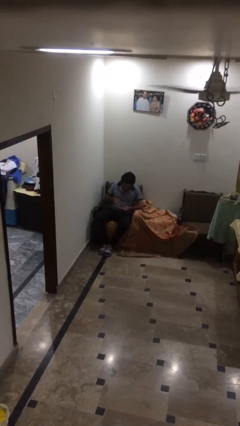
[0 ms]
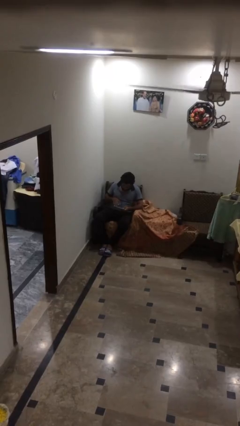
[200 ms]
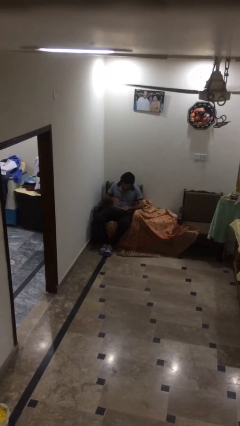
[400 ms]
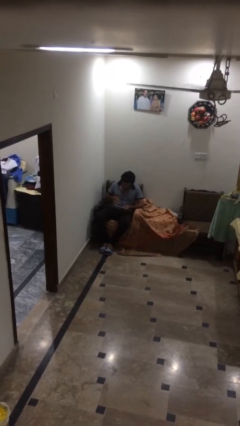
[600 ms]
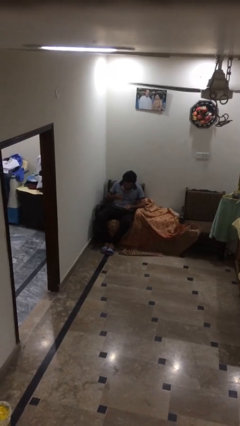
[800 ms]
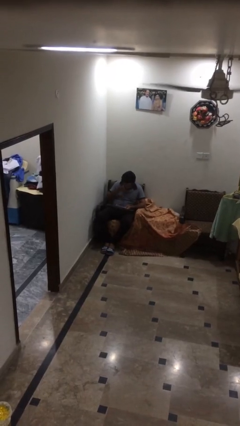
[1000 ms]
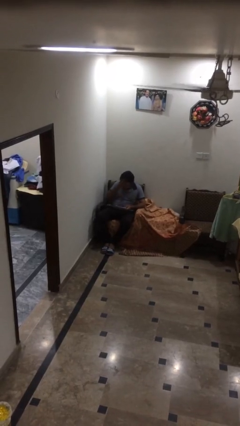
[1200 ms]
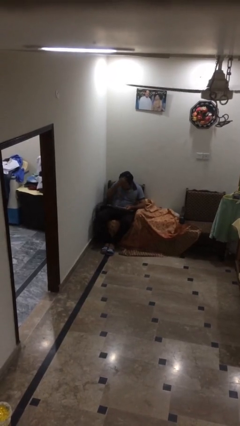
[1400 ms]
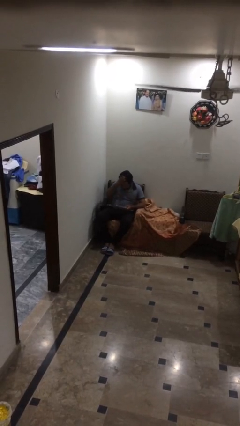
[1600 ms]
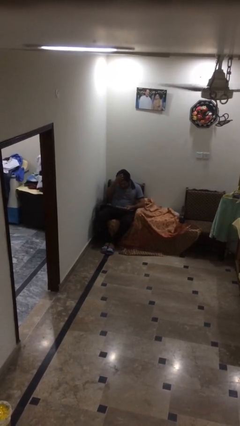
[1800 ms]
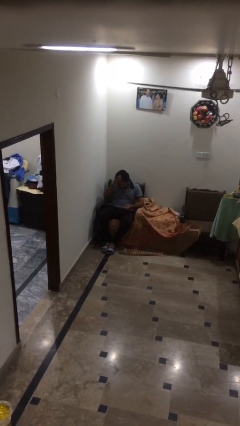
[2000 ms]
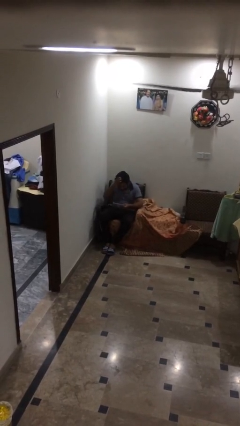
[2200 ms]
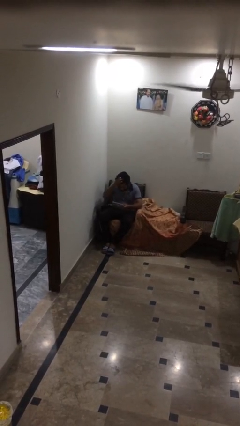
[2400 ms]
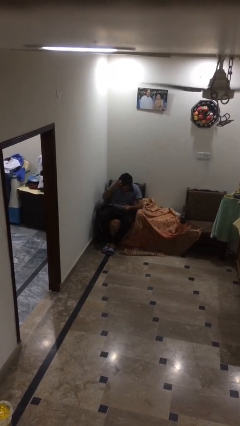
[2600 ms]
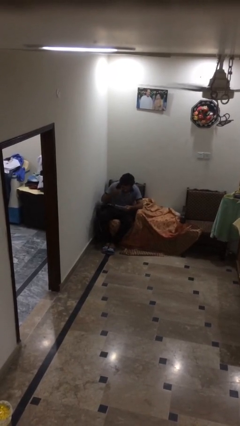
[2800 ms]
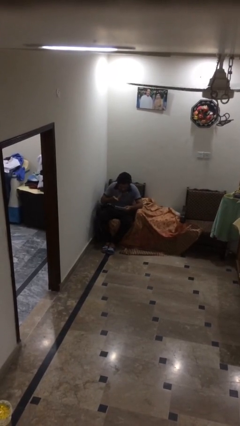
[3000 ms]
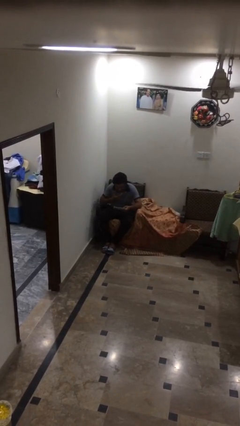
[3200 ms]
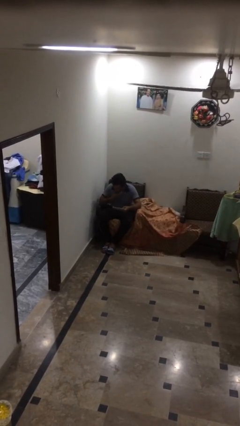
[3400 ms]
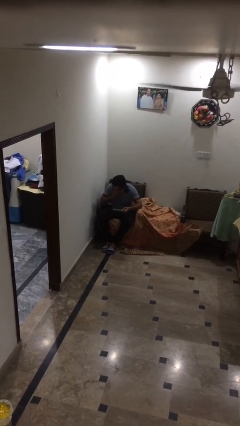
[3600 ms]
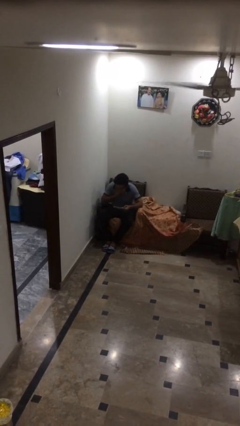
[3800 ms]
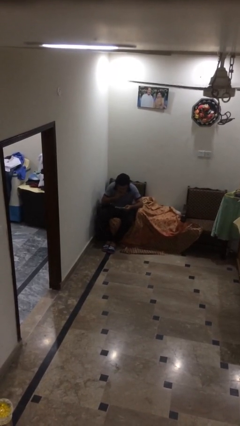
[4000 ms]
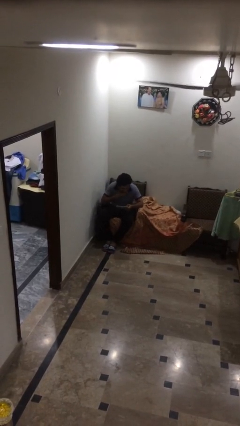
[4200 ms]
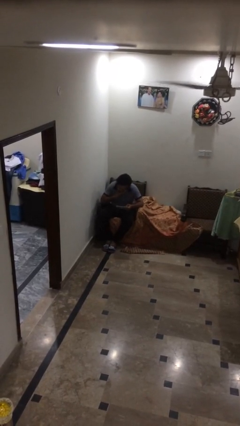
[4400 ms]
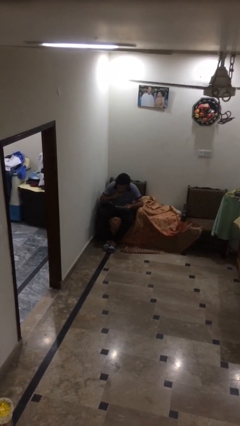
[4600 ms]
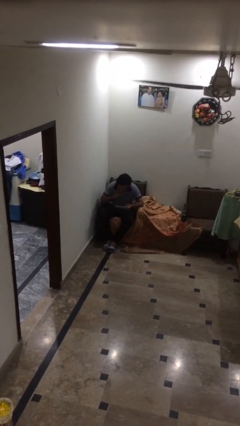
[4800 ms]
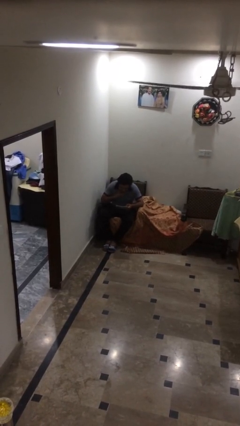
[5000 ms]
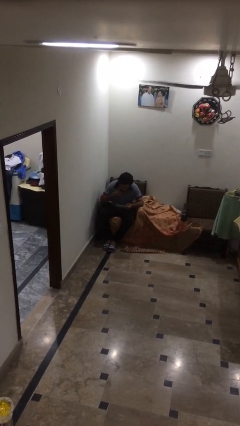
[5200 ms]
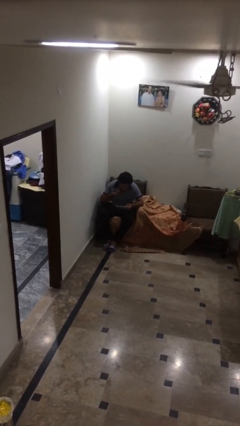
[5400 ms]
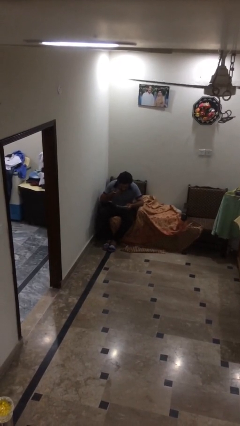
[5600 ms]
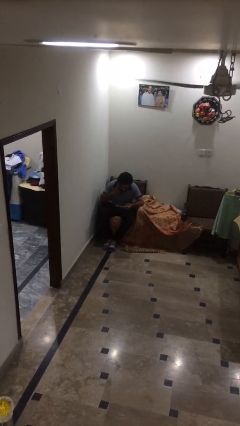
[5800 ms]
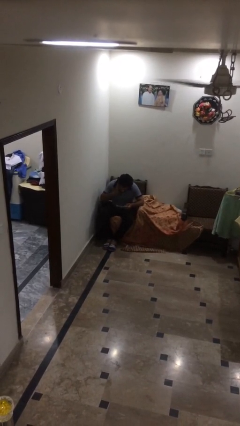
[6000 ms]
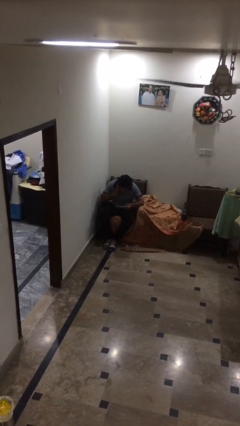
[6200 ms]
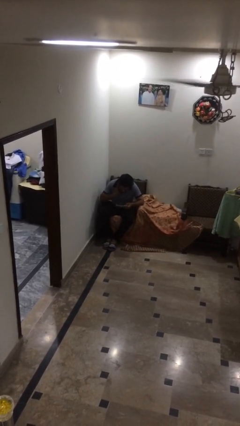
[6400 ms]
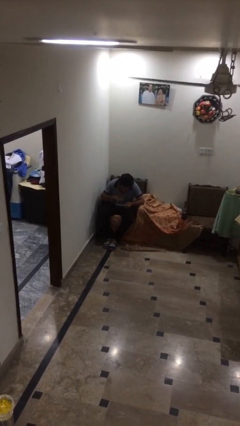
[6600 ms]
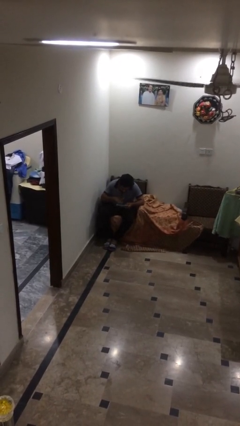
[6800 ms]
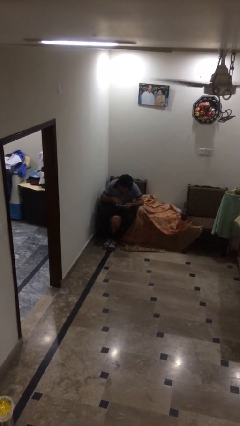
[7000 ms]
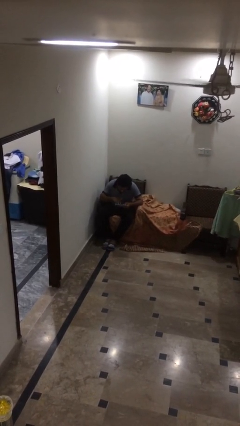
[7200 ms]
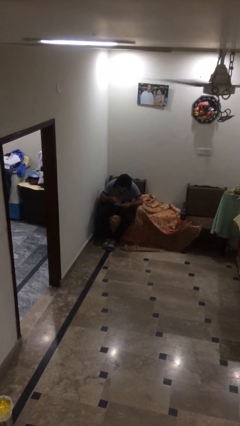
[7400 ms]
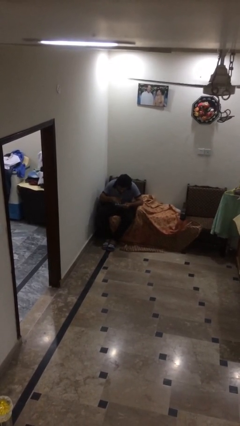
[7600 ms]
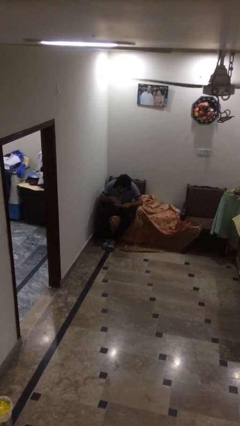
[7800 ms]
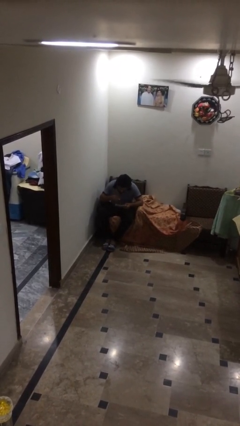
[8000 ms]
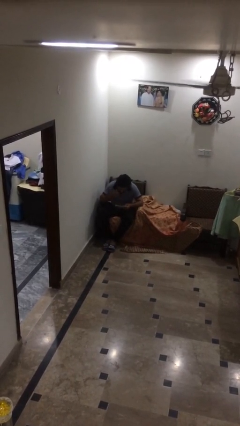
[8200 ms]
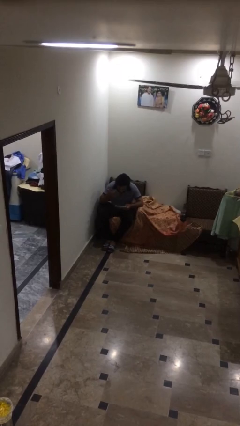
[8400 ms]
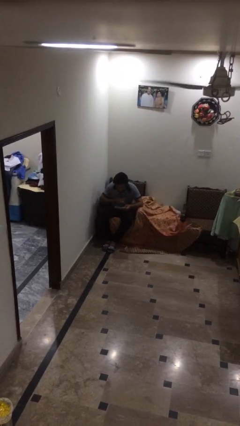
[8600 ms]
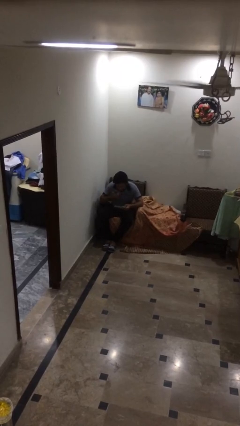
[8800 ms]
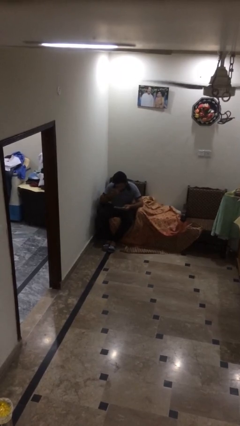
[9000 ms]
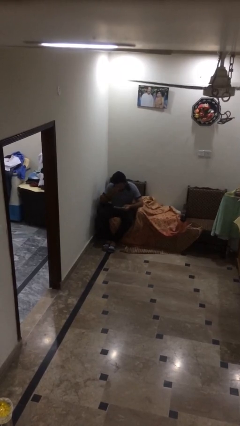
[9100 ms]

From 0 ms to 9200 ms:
person reads document

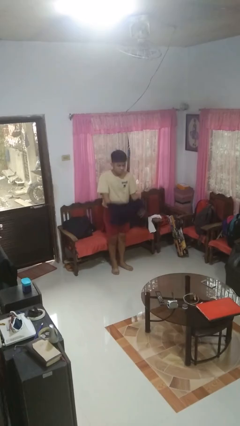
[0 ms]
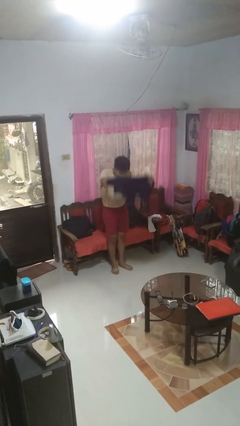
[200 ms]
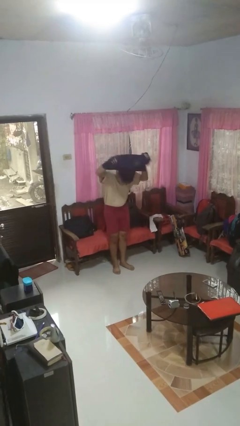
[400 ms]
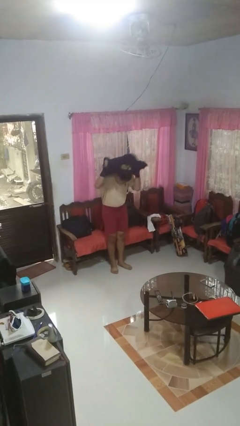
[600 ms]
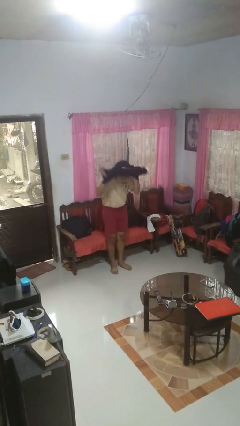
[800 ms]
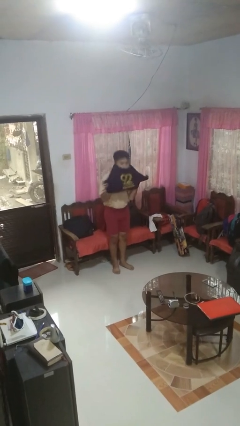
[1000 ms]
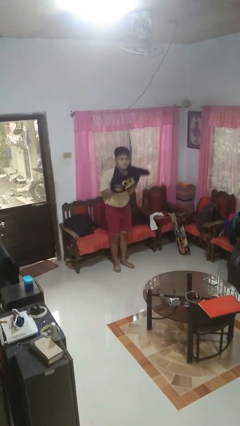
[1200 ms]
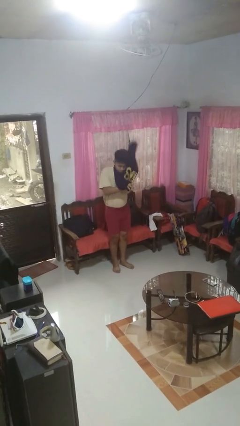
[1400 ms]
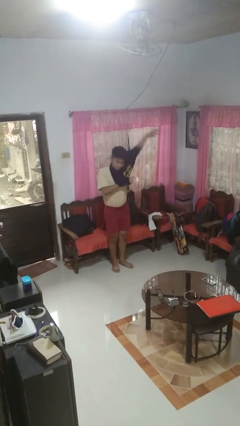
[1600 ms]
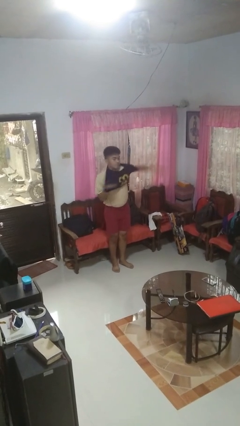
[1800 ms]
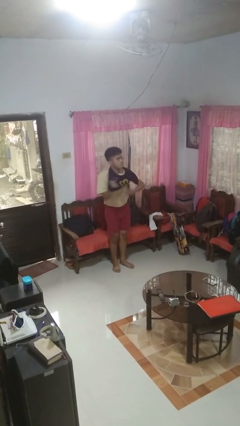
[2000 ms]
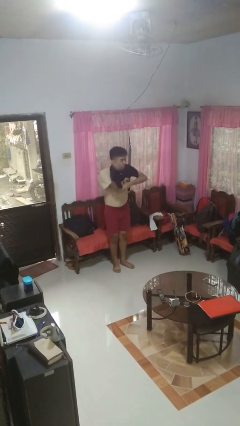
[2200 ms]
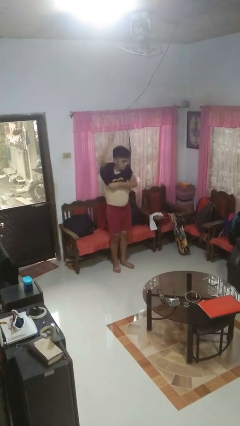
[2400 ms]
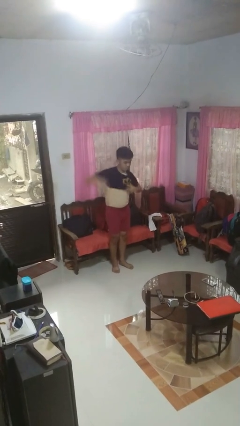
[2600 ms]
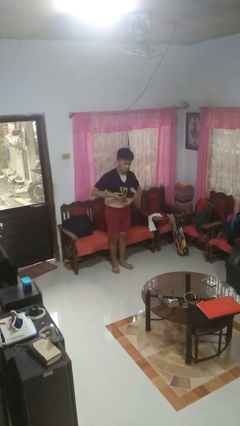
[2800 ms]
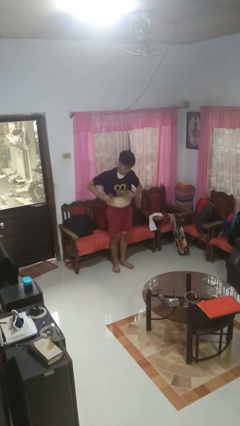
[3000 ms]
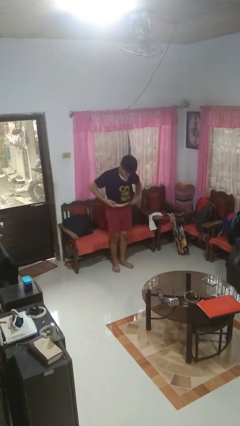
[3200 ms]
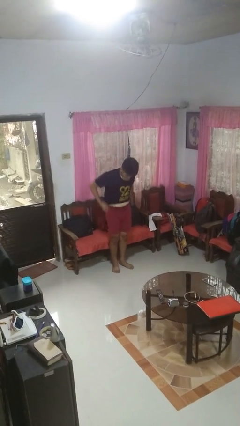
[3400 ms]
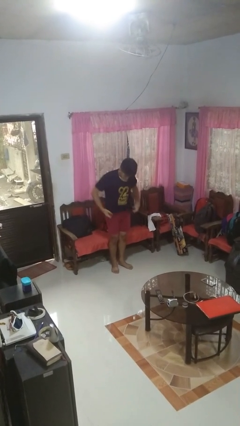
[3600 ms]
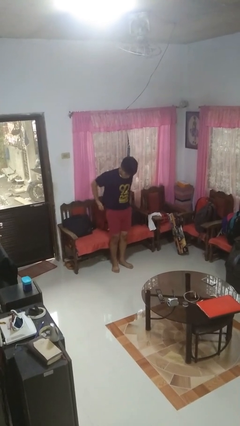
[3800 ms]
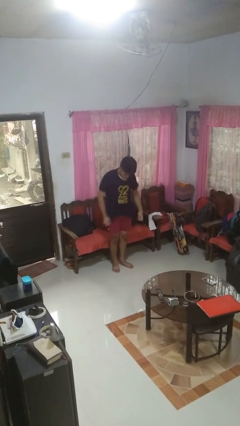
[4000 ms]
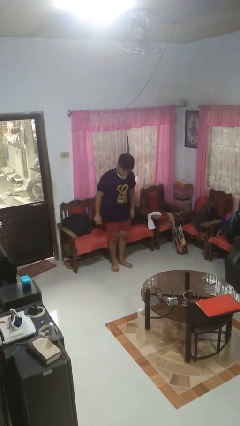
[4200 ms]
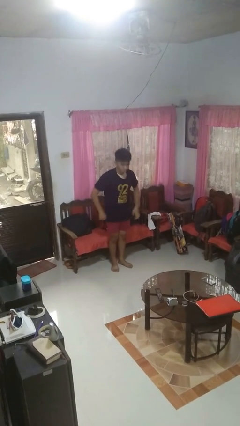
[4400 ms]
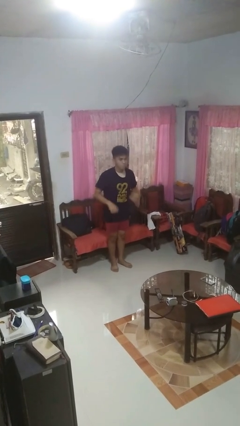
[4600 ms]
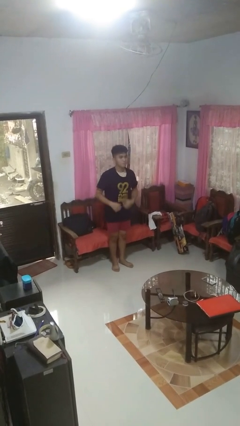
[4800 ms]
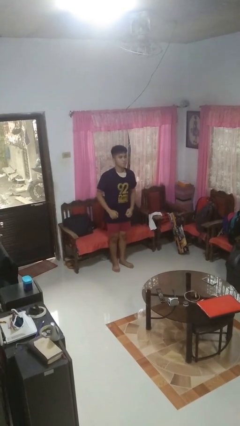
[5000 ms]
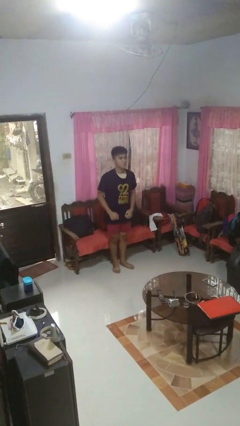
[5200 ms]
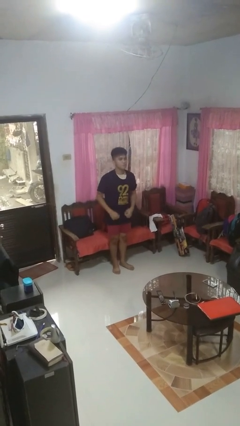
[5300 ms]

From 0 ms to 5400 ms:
person puts on shirt

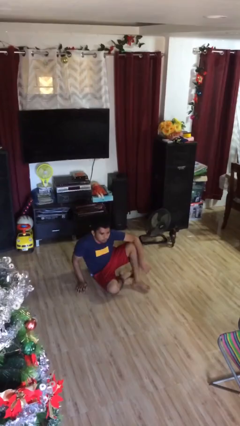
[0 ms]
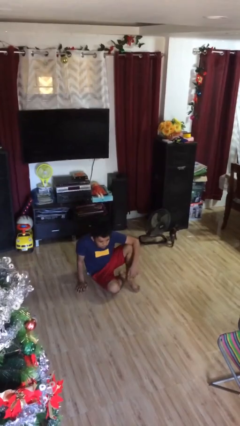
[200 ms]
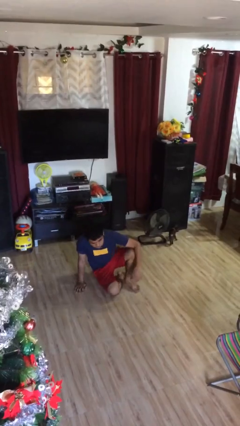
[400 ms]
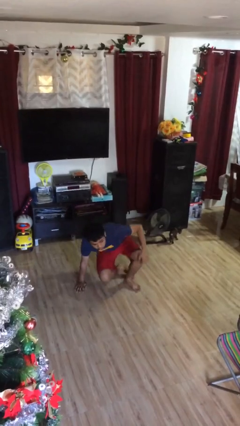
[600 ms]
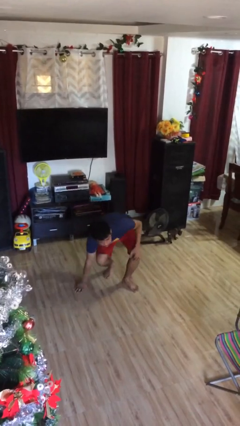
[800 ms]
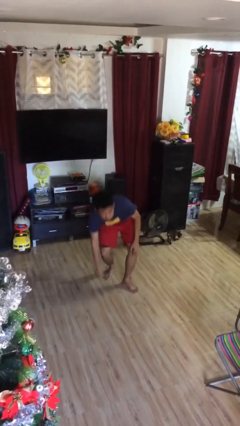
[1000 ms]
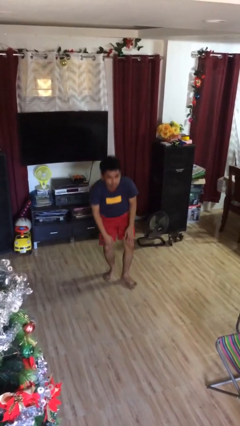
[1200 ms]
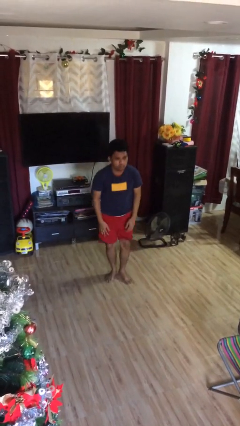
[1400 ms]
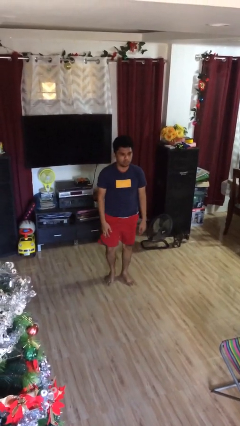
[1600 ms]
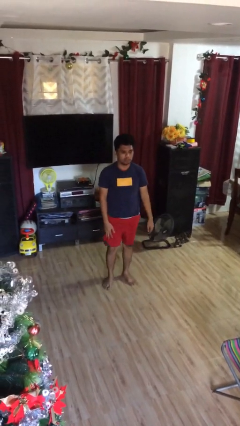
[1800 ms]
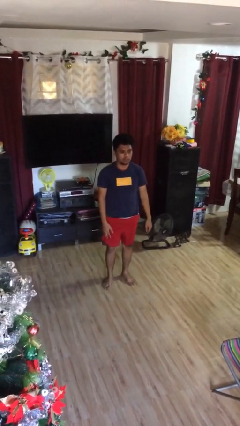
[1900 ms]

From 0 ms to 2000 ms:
person stands up

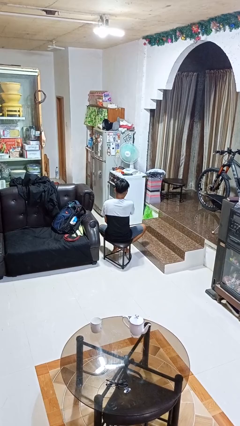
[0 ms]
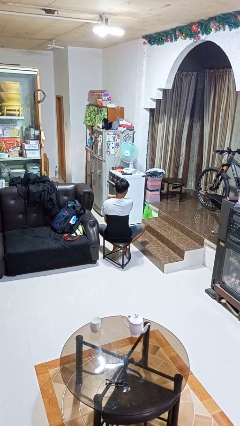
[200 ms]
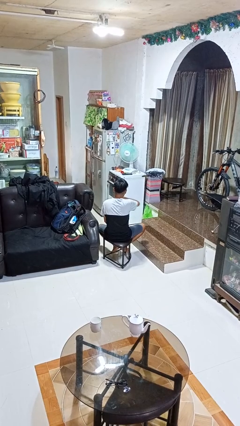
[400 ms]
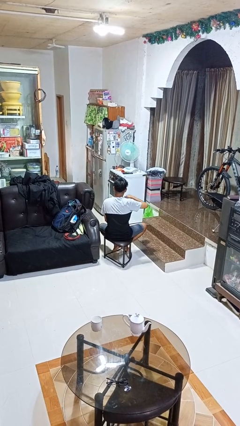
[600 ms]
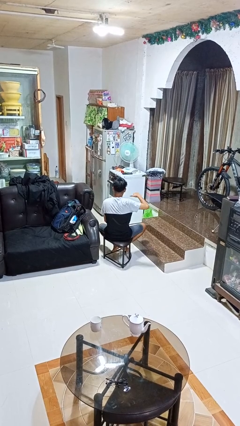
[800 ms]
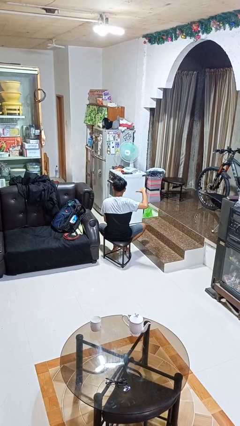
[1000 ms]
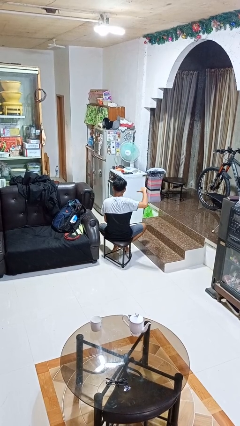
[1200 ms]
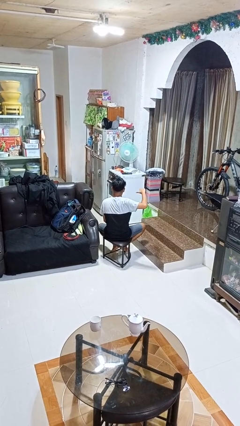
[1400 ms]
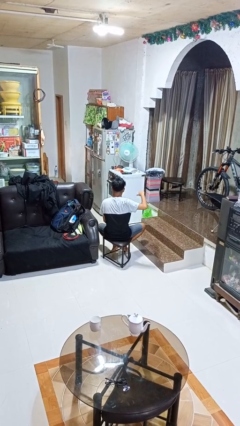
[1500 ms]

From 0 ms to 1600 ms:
person gestures cut
